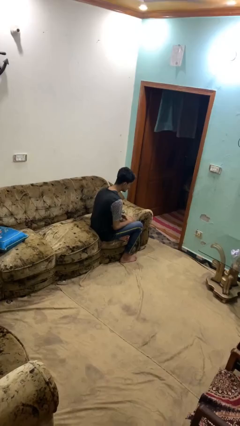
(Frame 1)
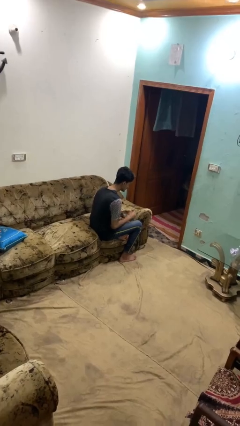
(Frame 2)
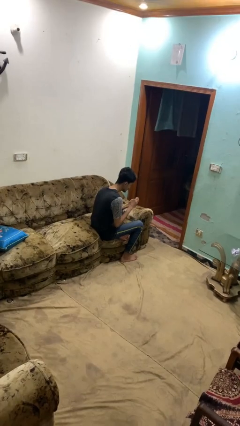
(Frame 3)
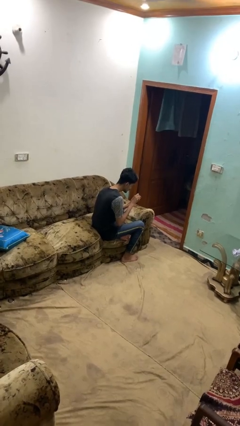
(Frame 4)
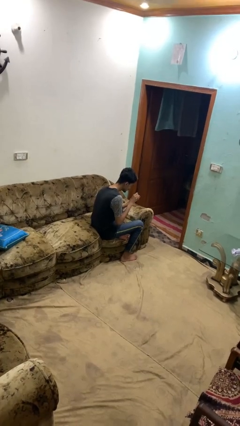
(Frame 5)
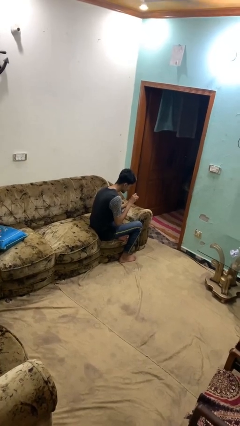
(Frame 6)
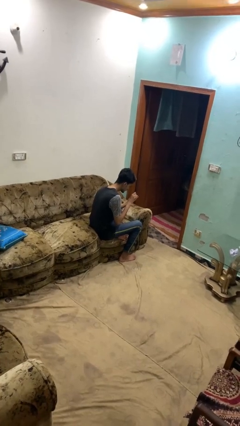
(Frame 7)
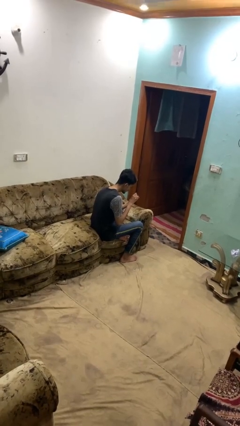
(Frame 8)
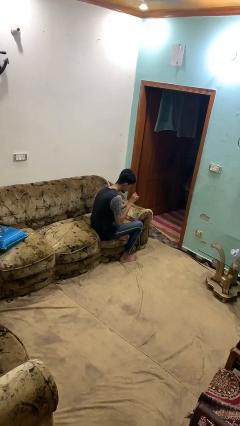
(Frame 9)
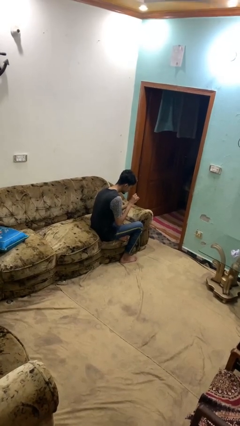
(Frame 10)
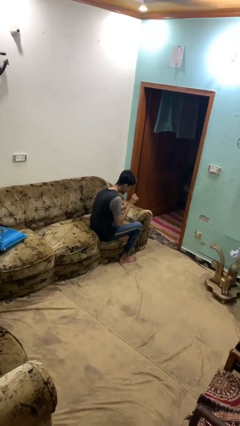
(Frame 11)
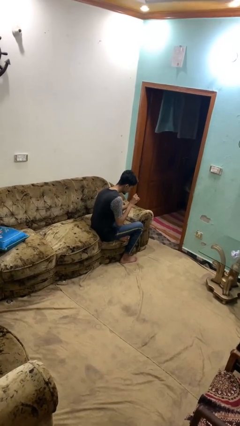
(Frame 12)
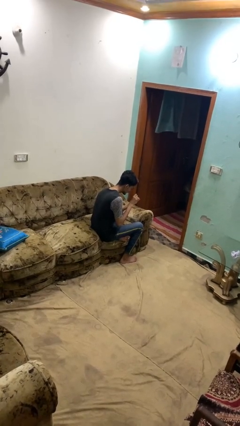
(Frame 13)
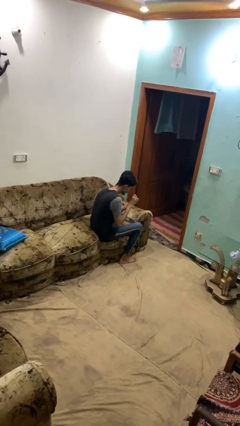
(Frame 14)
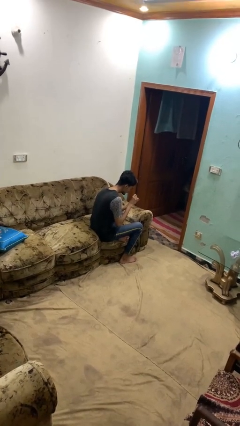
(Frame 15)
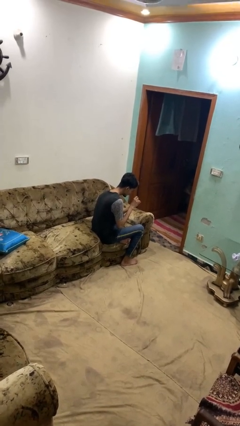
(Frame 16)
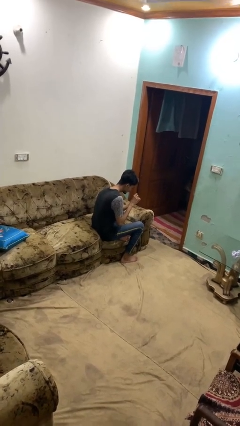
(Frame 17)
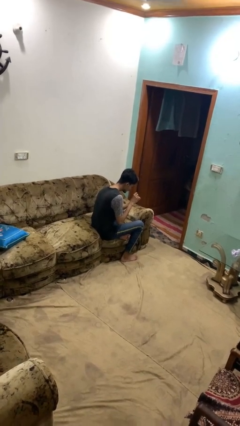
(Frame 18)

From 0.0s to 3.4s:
person clips fingernails

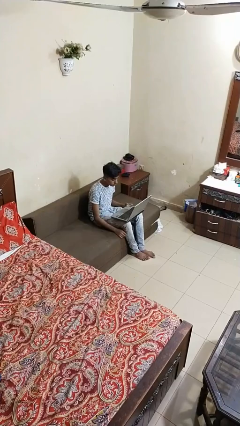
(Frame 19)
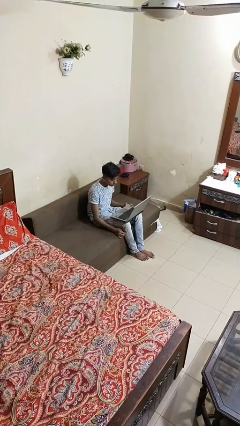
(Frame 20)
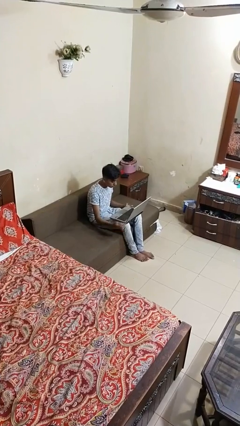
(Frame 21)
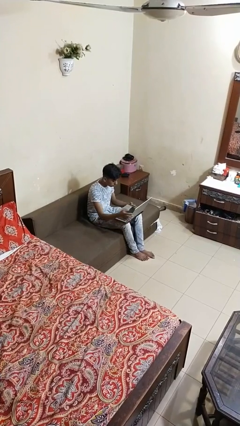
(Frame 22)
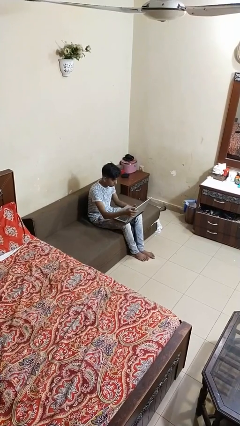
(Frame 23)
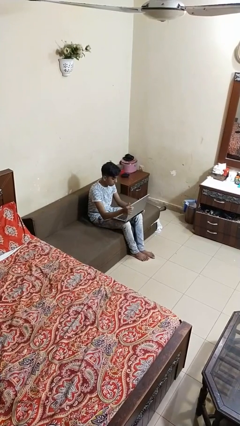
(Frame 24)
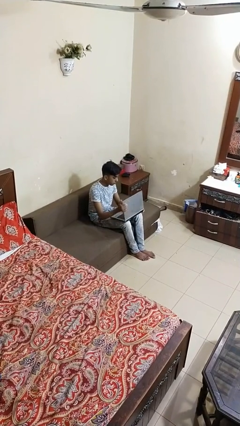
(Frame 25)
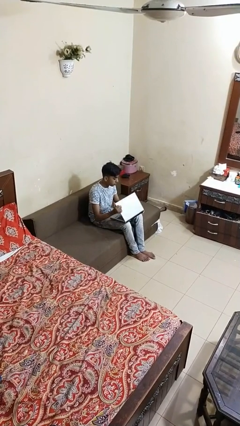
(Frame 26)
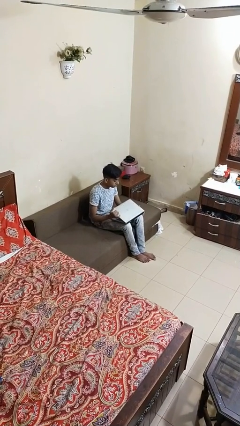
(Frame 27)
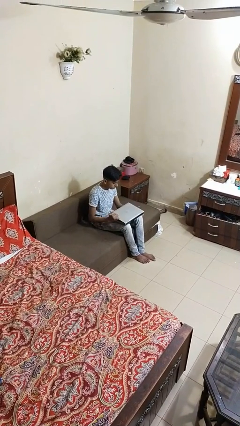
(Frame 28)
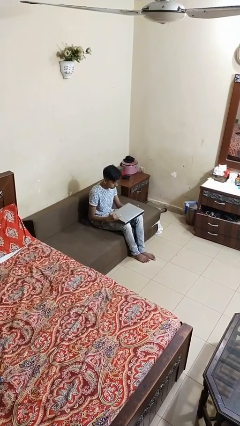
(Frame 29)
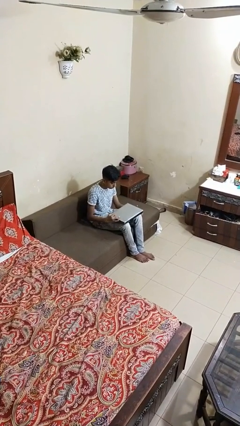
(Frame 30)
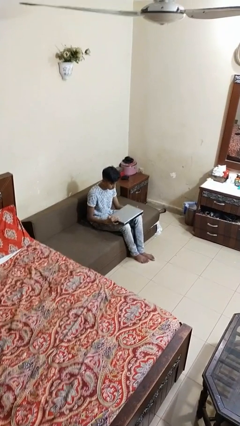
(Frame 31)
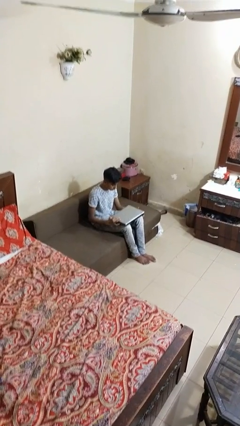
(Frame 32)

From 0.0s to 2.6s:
person closes laptop

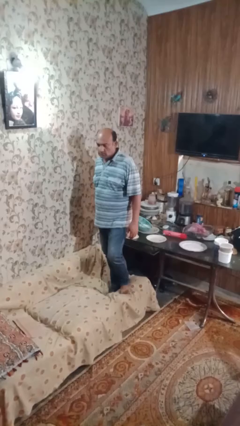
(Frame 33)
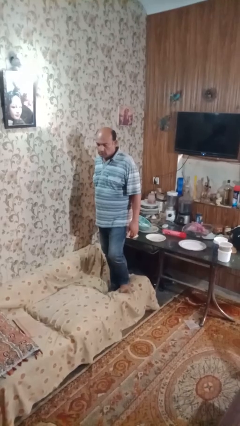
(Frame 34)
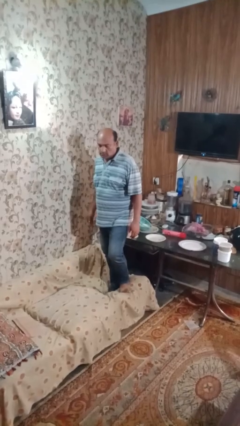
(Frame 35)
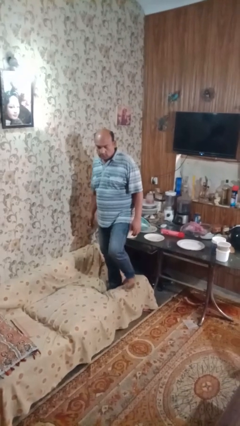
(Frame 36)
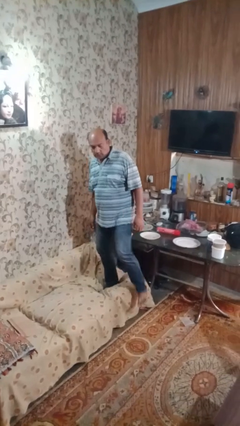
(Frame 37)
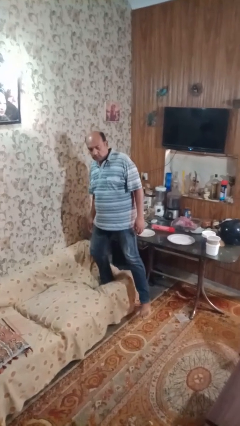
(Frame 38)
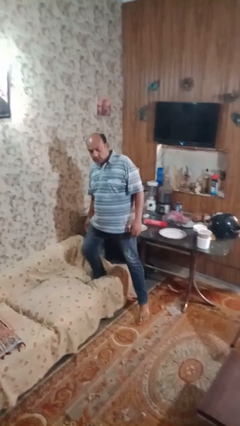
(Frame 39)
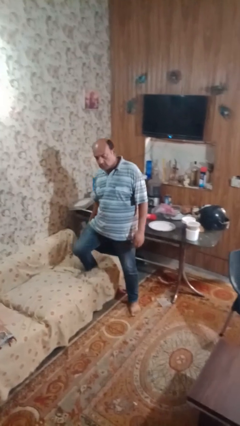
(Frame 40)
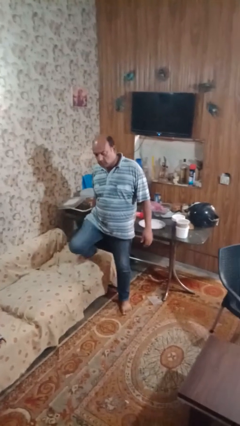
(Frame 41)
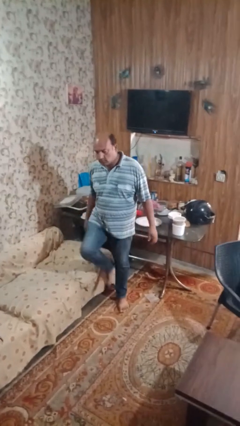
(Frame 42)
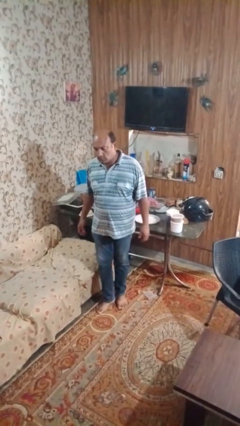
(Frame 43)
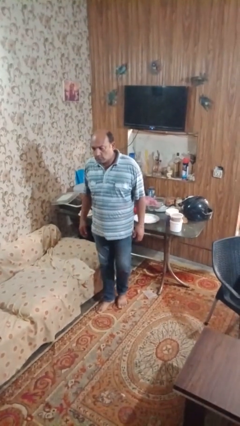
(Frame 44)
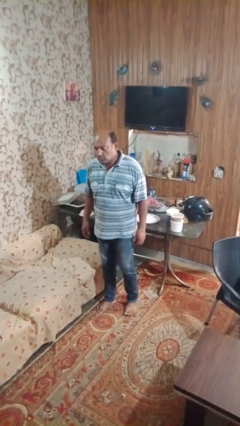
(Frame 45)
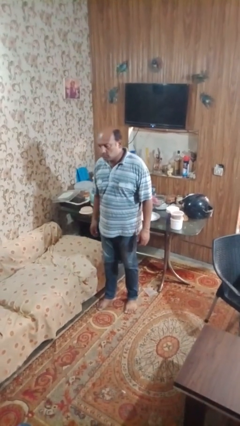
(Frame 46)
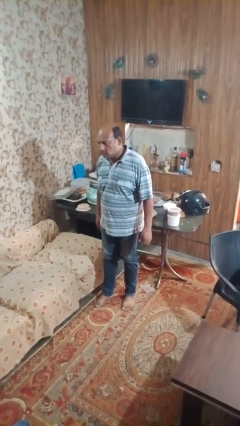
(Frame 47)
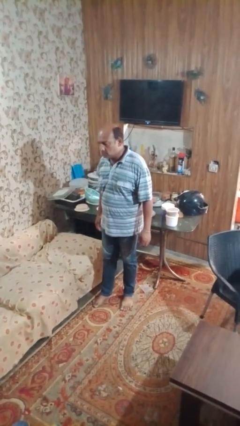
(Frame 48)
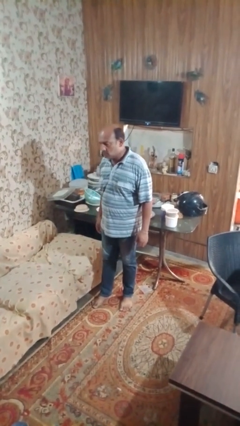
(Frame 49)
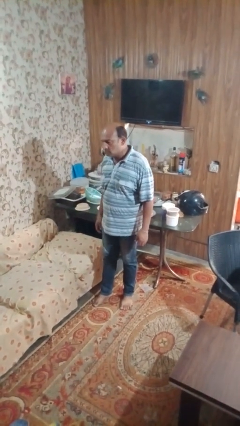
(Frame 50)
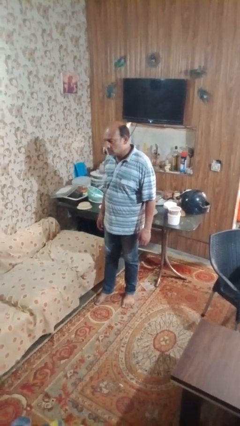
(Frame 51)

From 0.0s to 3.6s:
person climbs off couch

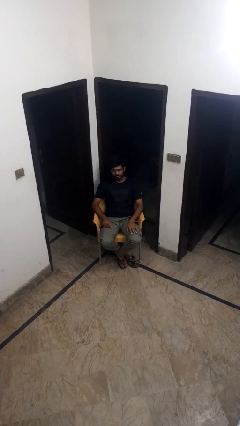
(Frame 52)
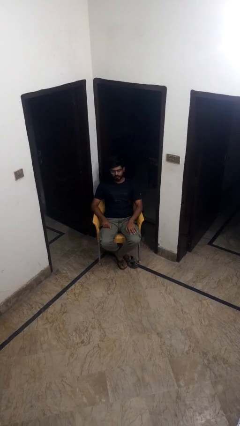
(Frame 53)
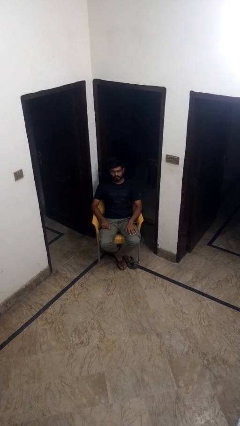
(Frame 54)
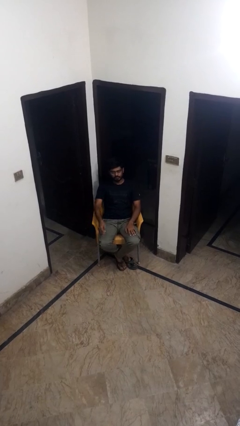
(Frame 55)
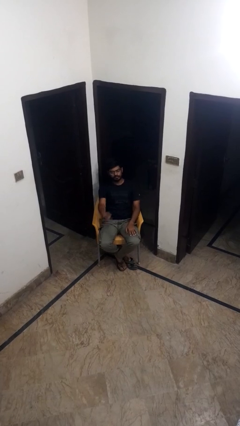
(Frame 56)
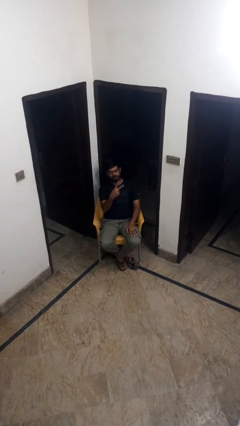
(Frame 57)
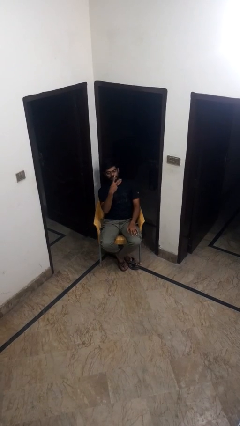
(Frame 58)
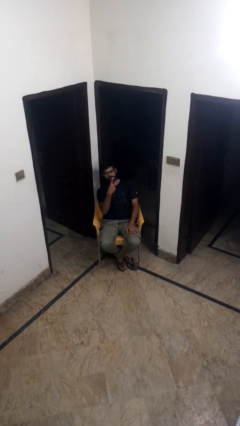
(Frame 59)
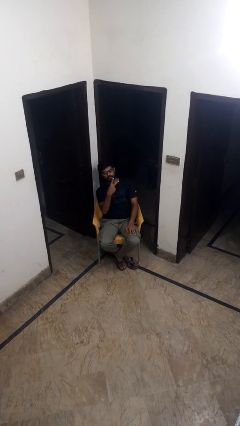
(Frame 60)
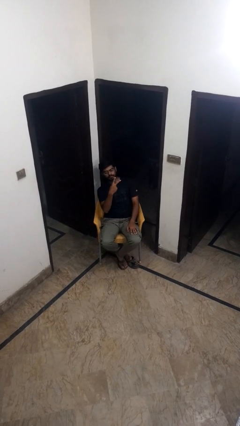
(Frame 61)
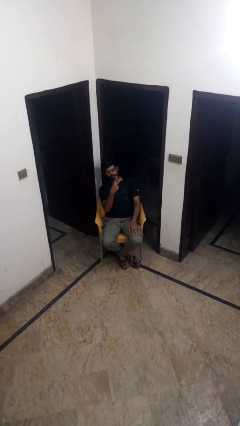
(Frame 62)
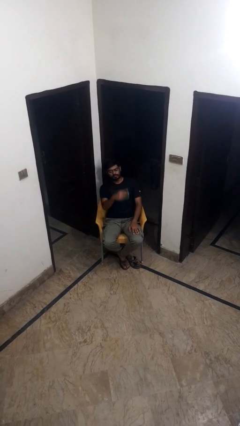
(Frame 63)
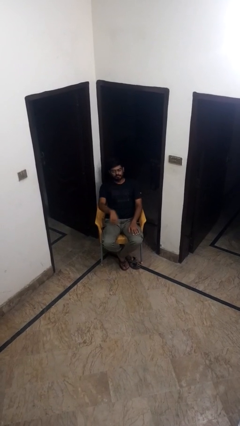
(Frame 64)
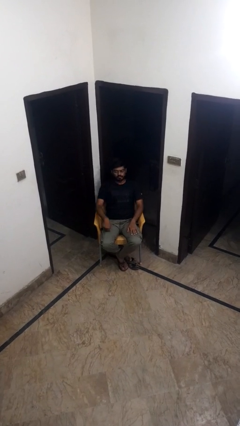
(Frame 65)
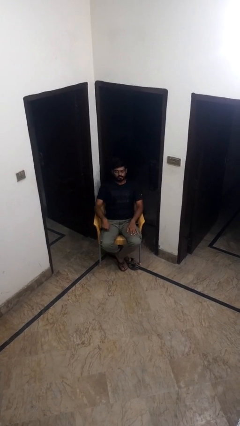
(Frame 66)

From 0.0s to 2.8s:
person gestures peace

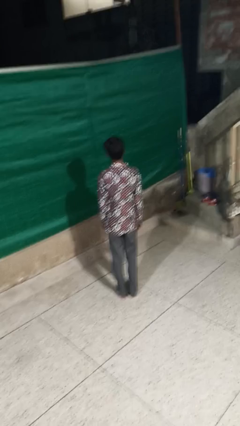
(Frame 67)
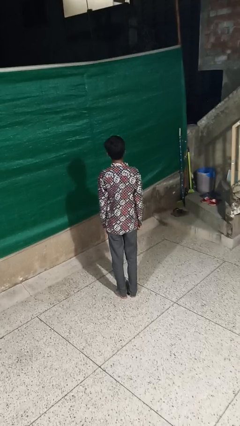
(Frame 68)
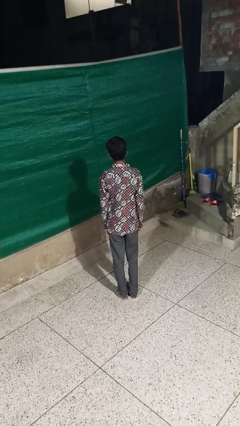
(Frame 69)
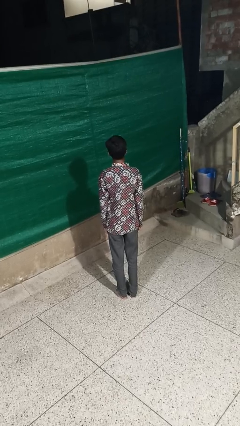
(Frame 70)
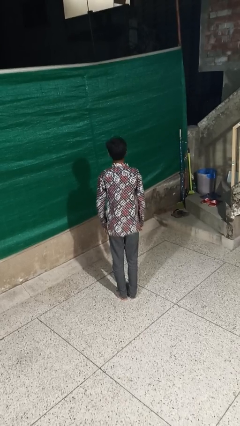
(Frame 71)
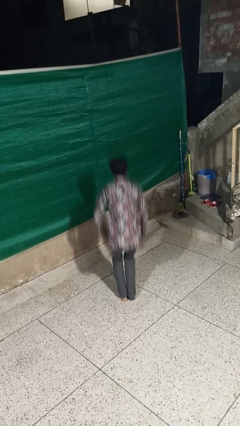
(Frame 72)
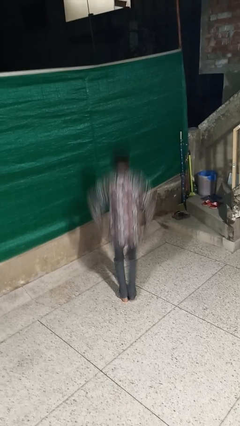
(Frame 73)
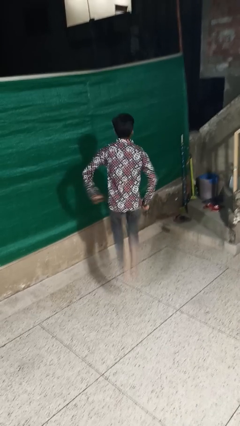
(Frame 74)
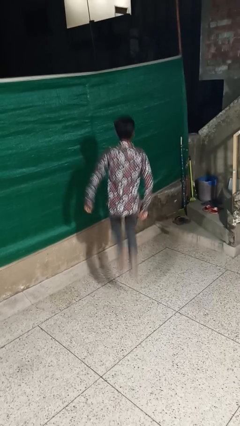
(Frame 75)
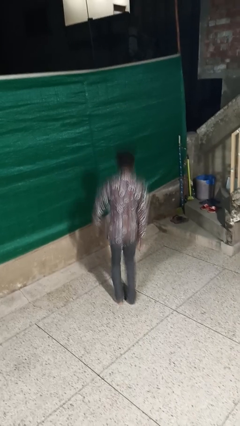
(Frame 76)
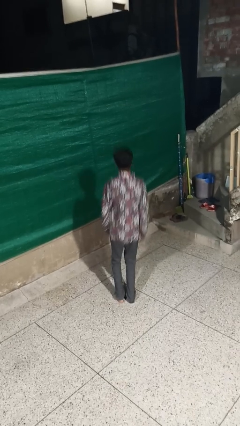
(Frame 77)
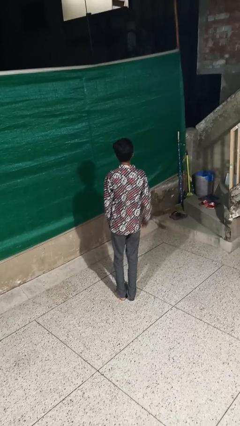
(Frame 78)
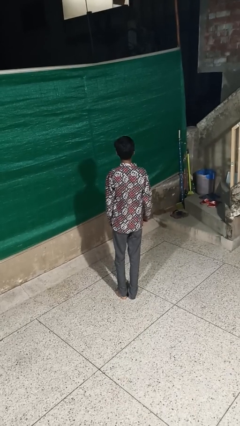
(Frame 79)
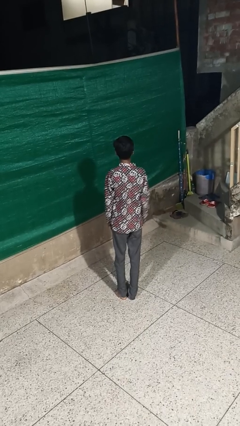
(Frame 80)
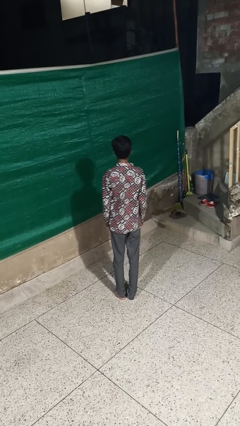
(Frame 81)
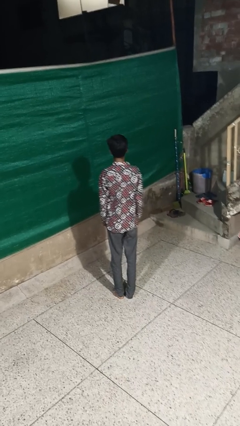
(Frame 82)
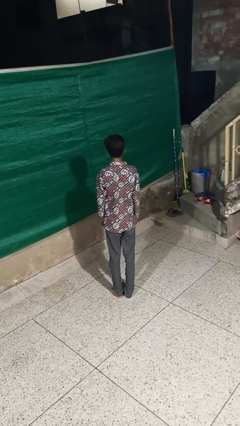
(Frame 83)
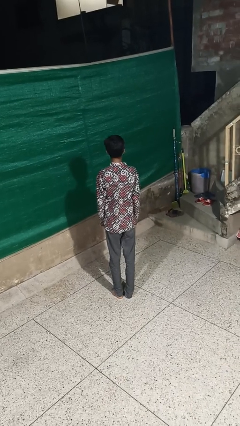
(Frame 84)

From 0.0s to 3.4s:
person jumps

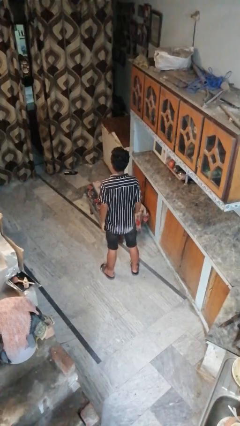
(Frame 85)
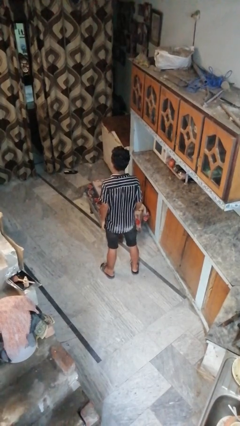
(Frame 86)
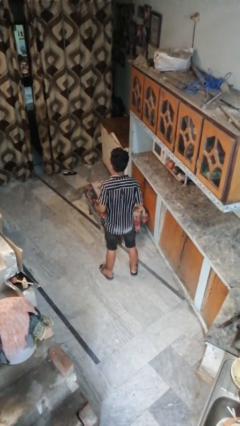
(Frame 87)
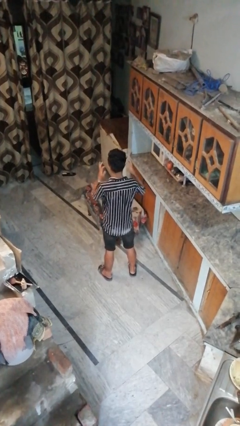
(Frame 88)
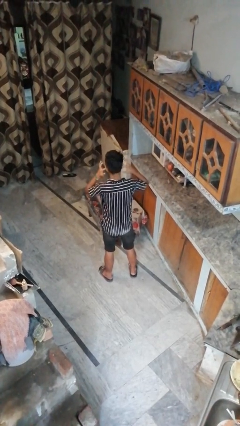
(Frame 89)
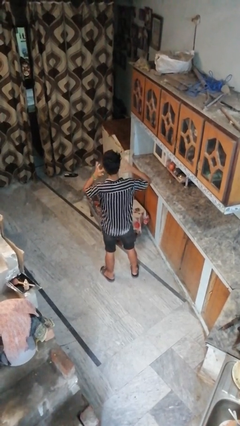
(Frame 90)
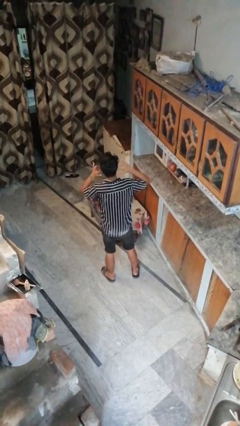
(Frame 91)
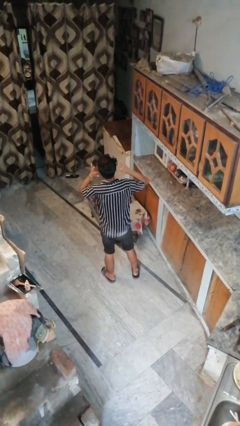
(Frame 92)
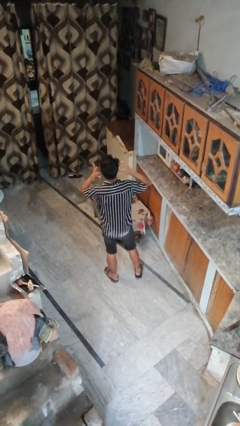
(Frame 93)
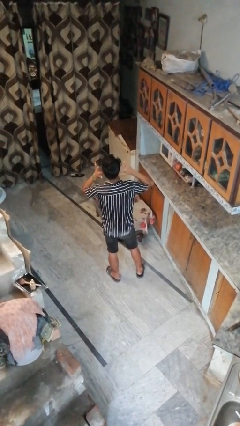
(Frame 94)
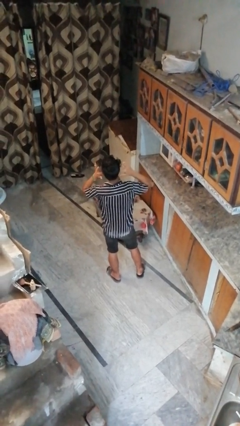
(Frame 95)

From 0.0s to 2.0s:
person puts fingers in ear
